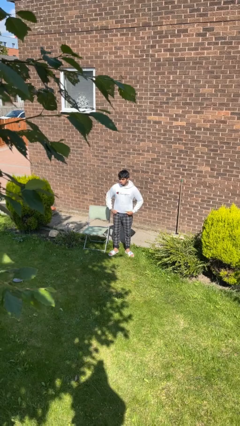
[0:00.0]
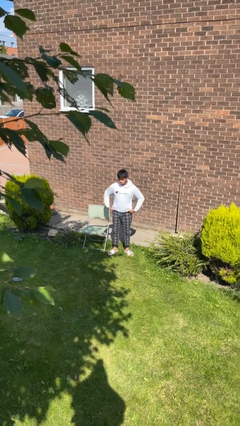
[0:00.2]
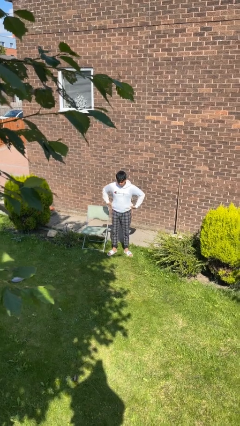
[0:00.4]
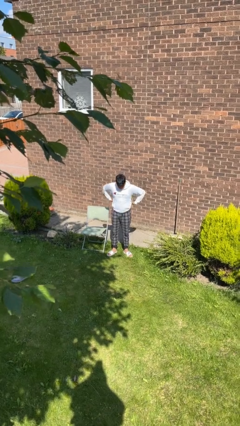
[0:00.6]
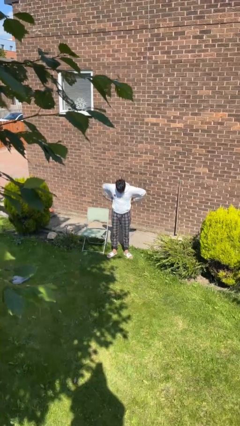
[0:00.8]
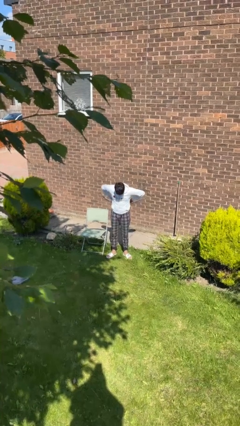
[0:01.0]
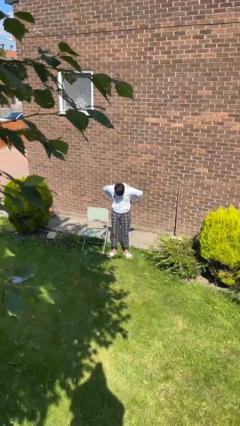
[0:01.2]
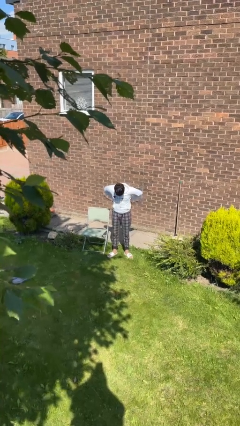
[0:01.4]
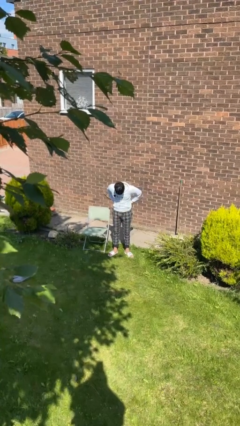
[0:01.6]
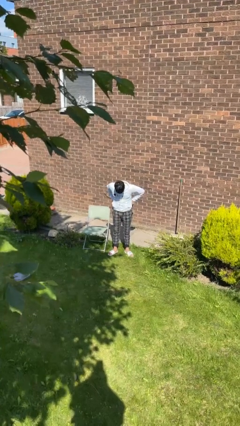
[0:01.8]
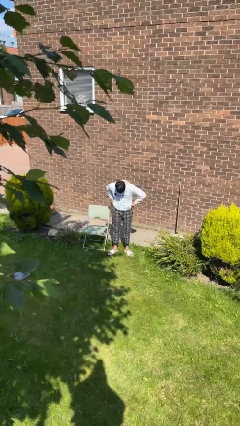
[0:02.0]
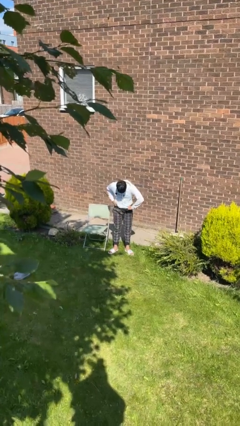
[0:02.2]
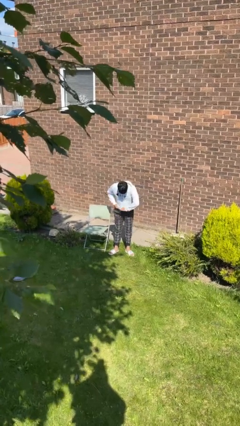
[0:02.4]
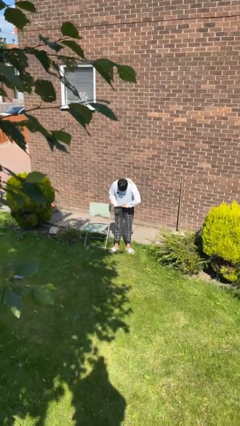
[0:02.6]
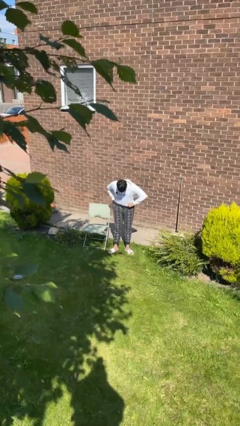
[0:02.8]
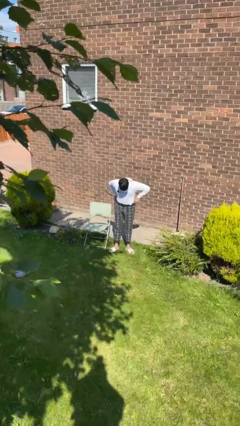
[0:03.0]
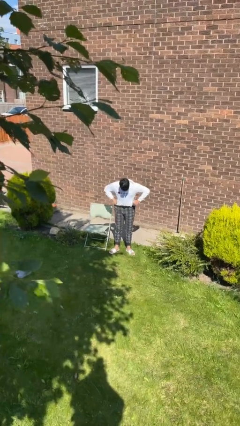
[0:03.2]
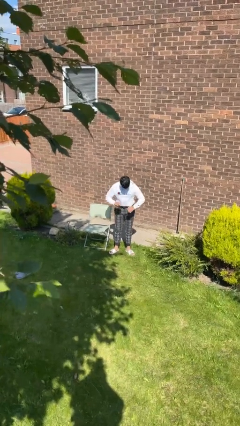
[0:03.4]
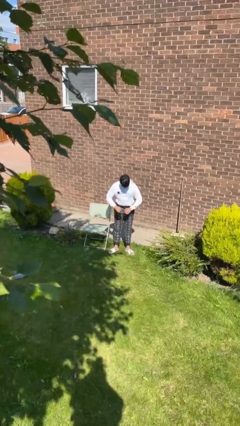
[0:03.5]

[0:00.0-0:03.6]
person tucks in shirt

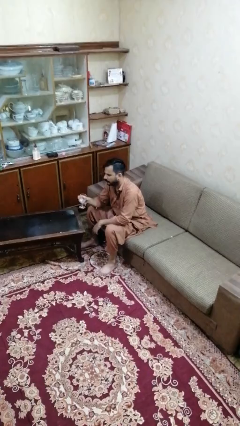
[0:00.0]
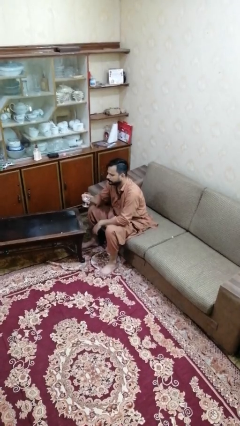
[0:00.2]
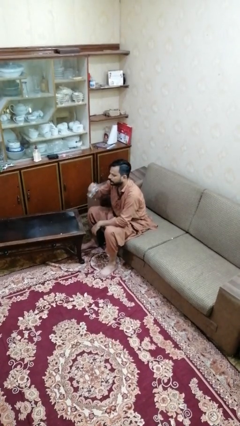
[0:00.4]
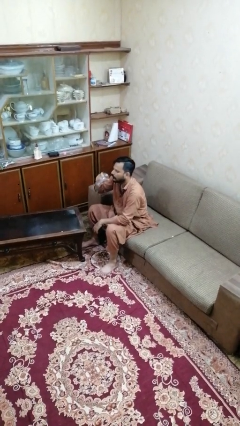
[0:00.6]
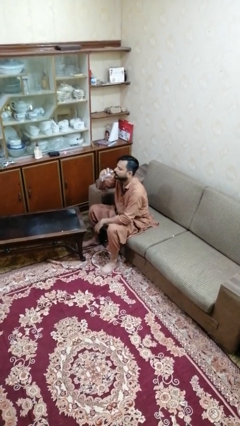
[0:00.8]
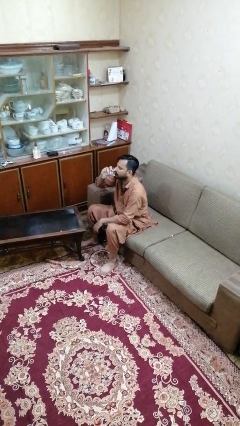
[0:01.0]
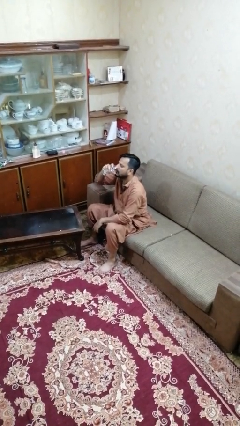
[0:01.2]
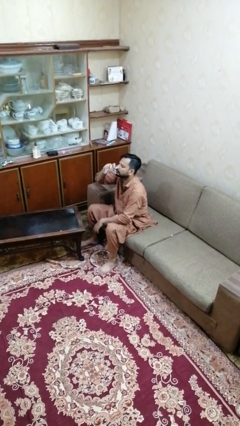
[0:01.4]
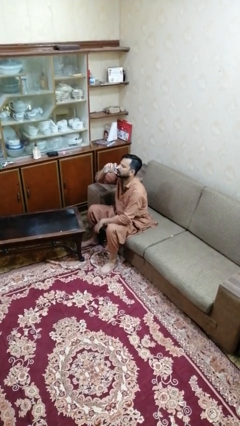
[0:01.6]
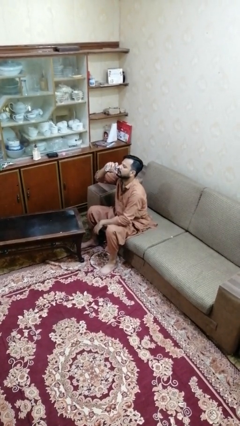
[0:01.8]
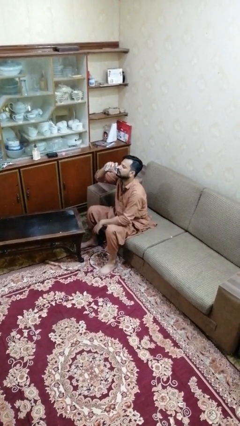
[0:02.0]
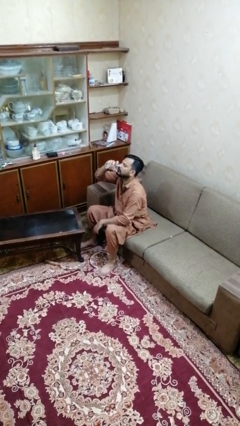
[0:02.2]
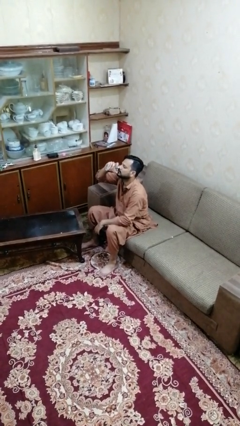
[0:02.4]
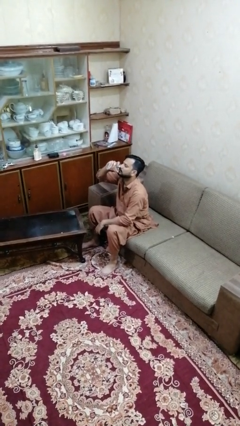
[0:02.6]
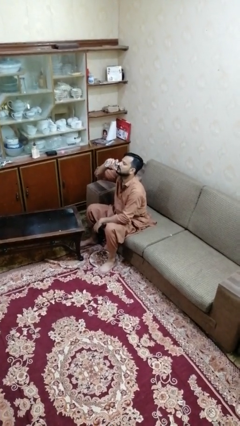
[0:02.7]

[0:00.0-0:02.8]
person drinks from shotglass

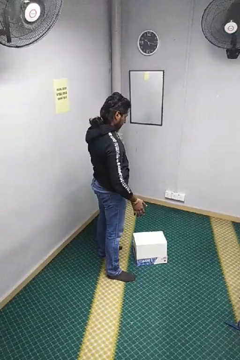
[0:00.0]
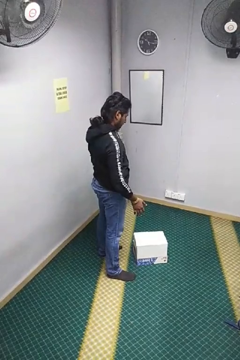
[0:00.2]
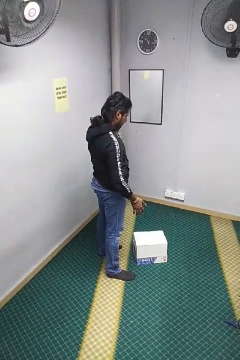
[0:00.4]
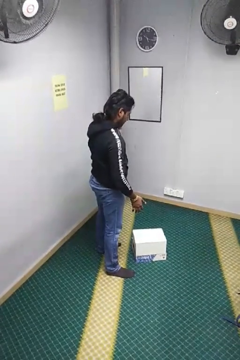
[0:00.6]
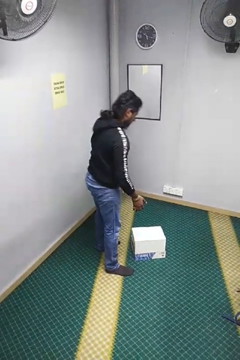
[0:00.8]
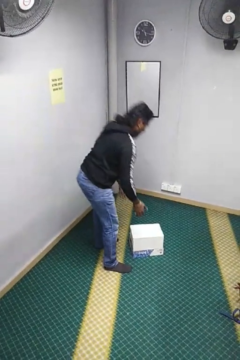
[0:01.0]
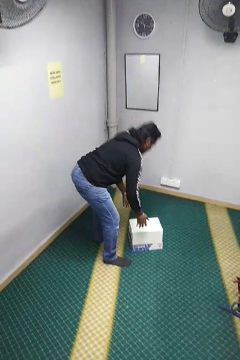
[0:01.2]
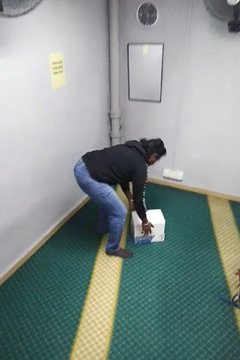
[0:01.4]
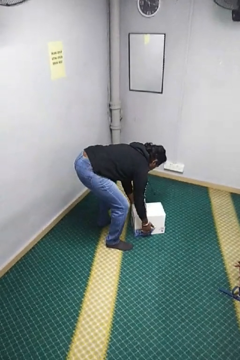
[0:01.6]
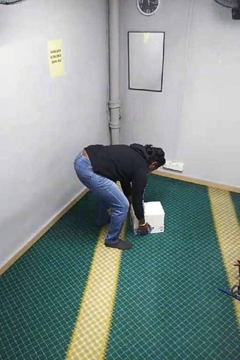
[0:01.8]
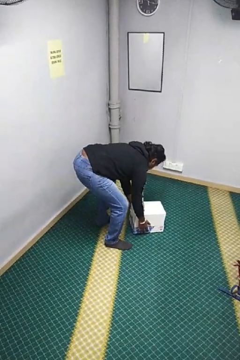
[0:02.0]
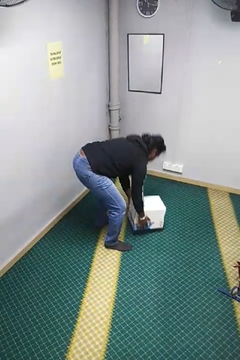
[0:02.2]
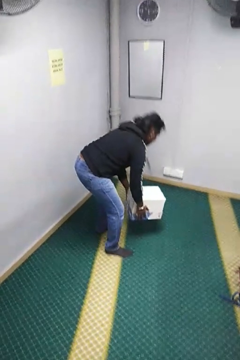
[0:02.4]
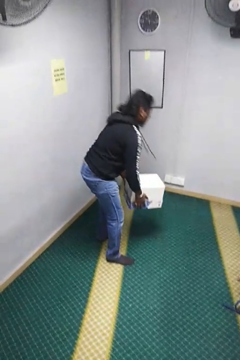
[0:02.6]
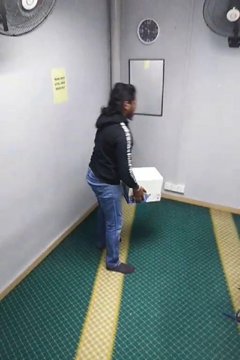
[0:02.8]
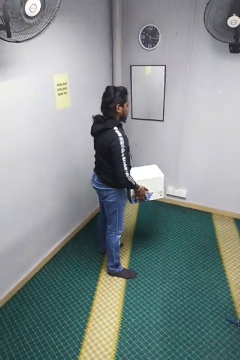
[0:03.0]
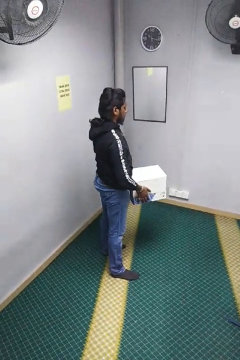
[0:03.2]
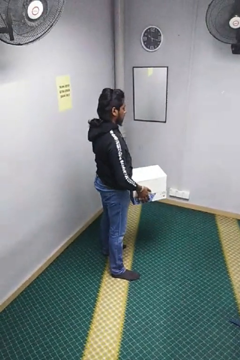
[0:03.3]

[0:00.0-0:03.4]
person picks up object from floor

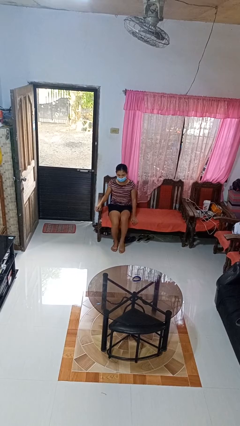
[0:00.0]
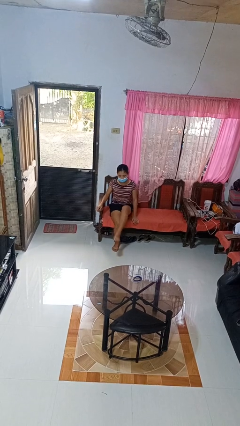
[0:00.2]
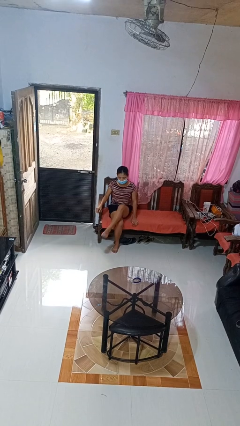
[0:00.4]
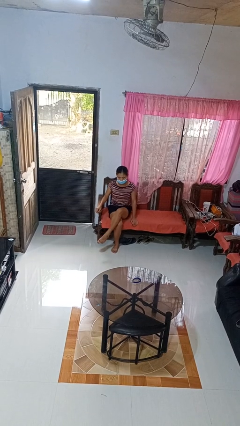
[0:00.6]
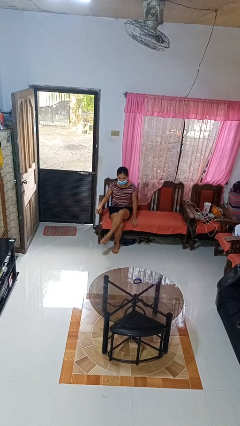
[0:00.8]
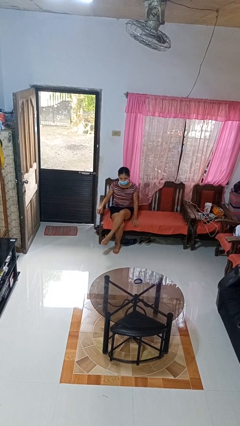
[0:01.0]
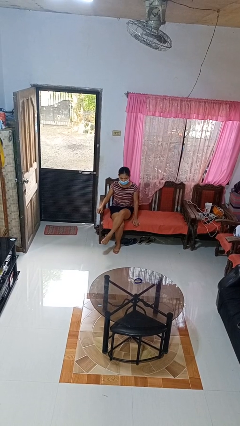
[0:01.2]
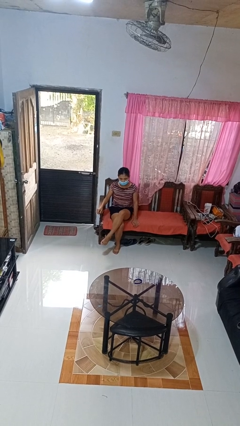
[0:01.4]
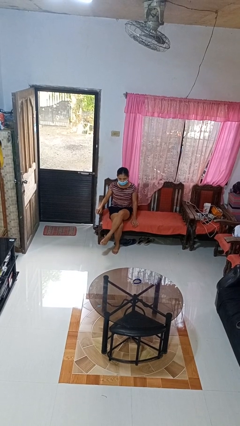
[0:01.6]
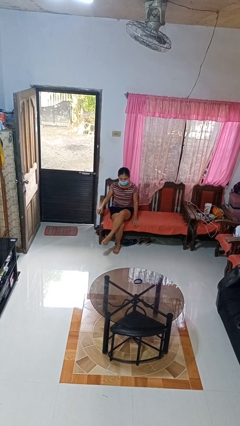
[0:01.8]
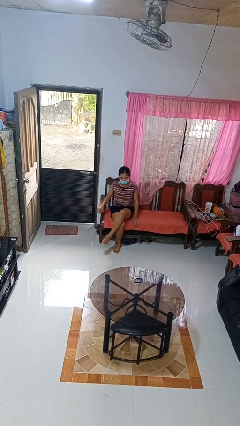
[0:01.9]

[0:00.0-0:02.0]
person crosses legs

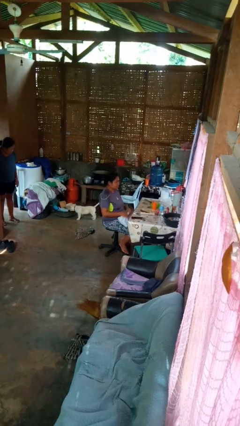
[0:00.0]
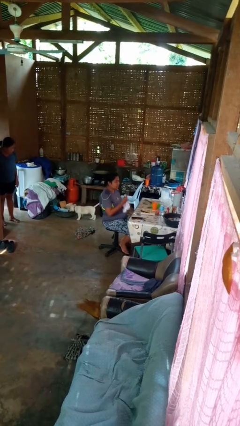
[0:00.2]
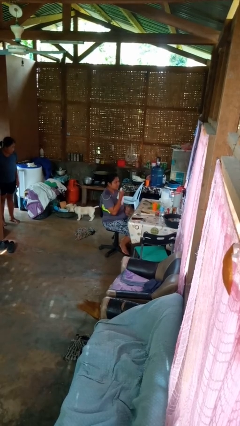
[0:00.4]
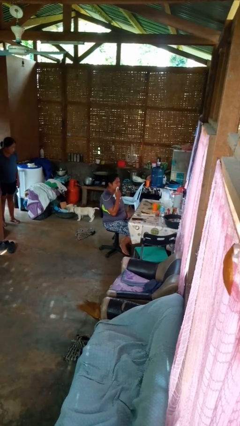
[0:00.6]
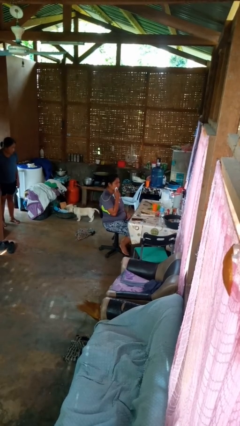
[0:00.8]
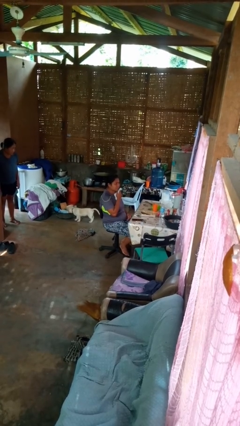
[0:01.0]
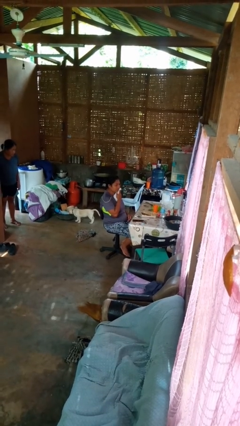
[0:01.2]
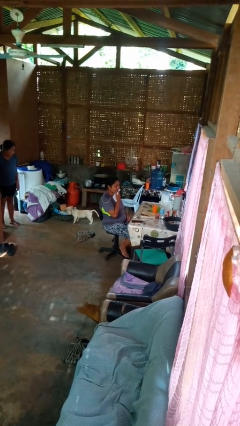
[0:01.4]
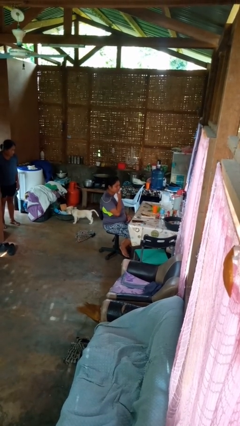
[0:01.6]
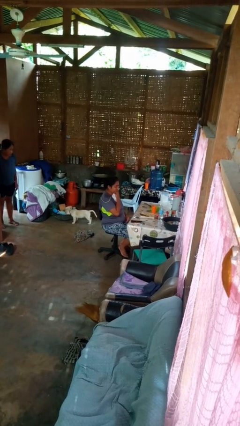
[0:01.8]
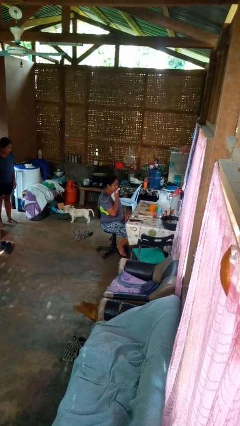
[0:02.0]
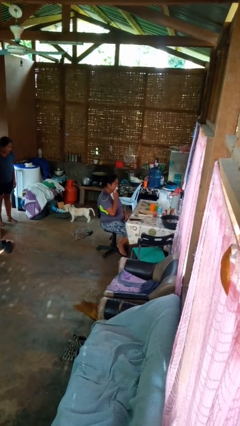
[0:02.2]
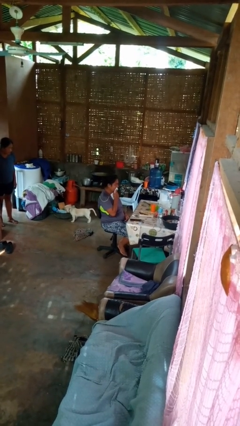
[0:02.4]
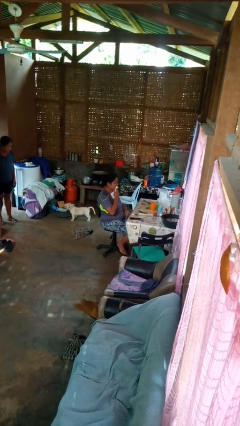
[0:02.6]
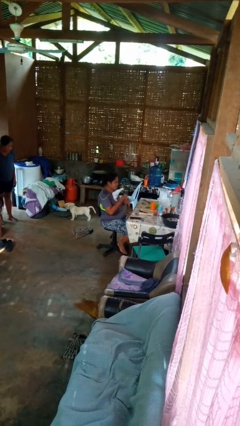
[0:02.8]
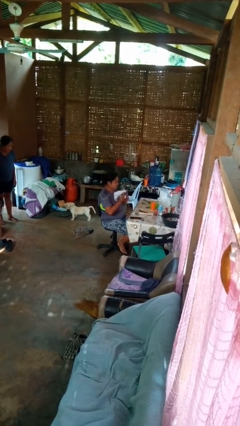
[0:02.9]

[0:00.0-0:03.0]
person wipes mouth with napkin

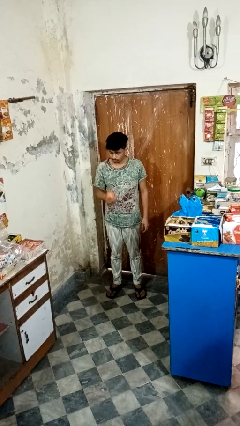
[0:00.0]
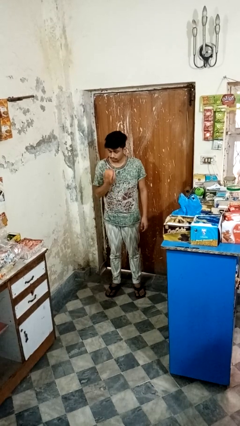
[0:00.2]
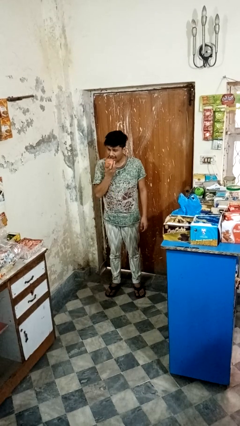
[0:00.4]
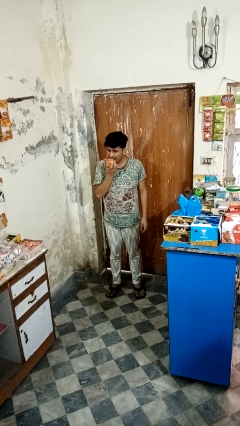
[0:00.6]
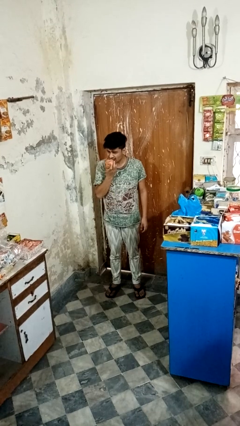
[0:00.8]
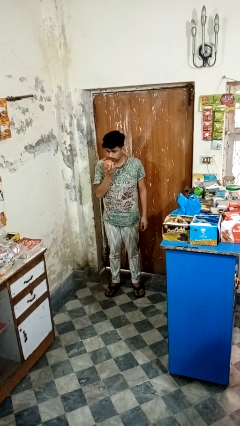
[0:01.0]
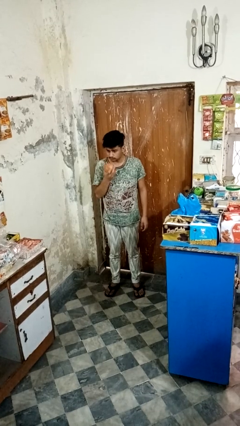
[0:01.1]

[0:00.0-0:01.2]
person eats apple

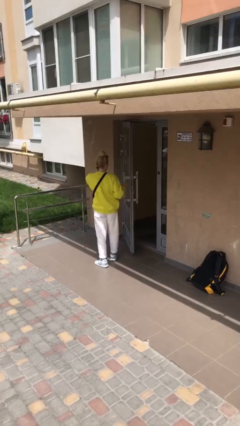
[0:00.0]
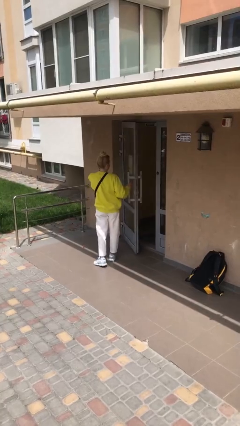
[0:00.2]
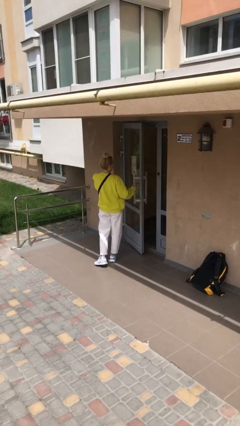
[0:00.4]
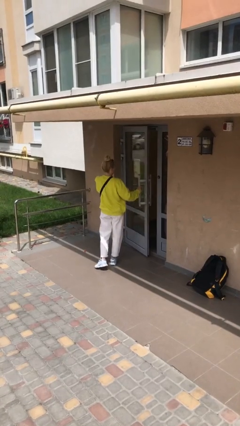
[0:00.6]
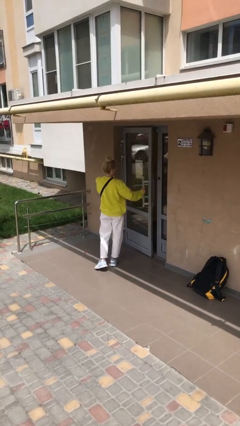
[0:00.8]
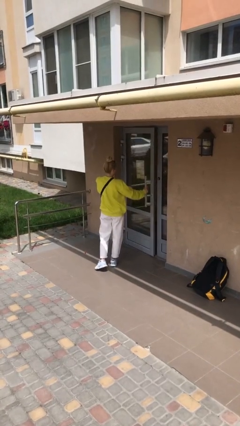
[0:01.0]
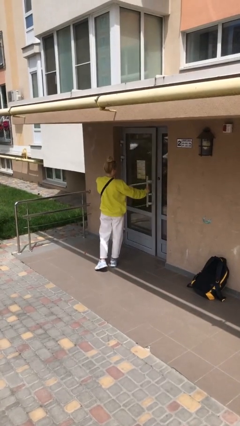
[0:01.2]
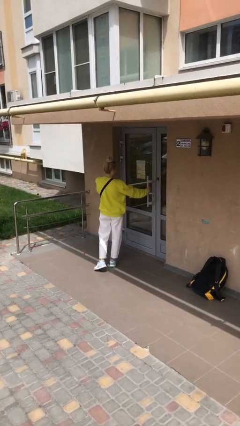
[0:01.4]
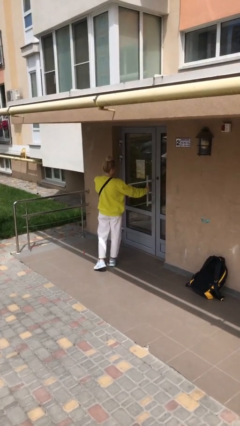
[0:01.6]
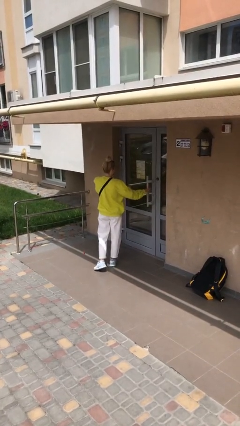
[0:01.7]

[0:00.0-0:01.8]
person closes facility door
